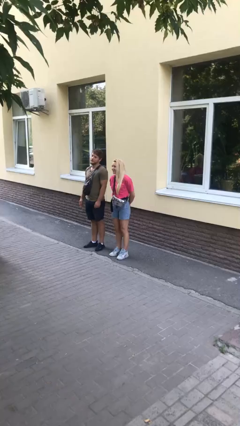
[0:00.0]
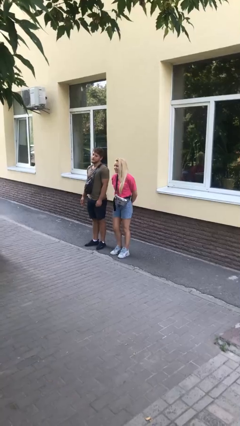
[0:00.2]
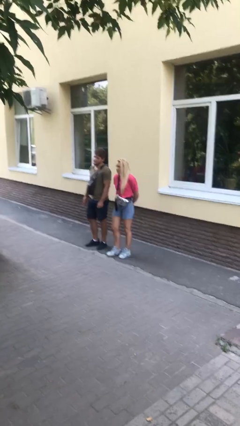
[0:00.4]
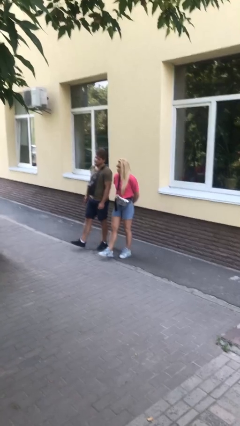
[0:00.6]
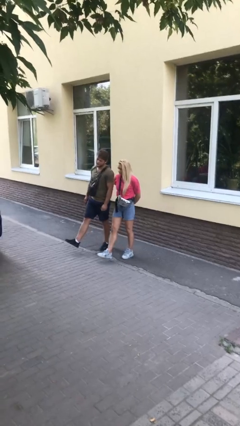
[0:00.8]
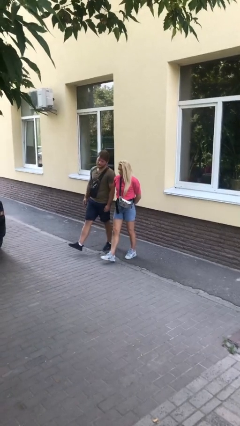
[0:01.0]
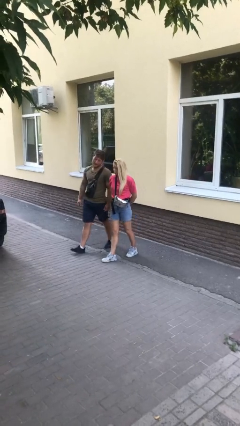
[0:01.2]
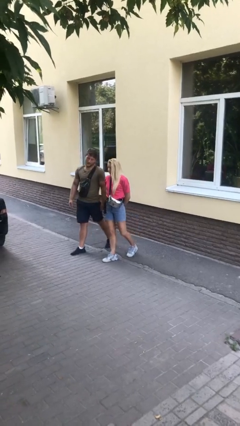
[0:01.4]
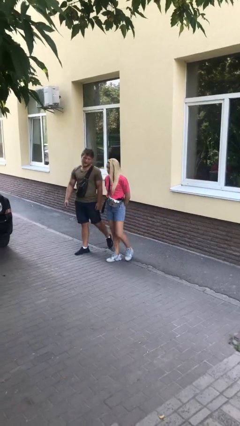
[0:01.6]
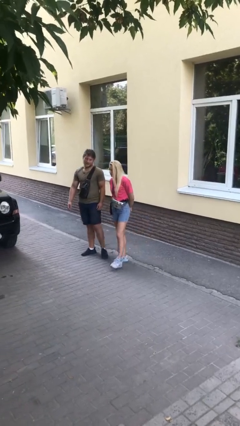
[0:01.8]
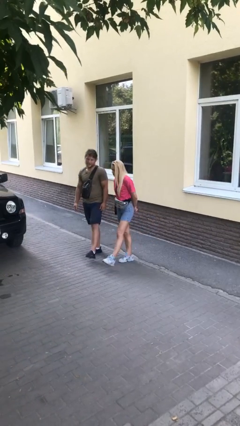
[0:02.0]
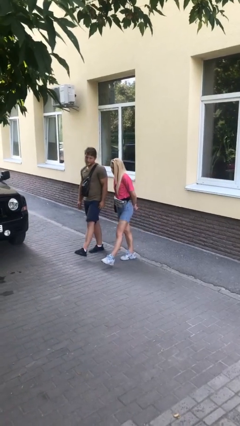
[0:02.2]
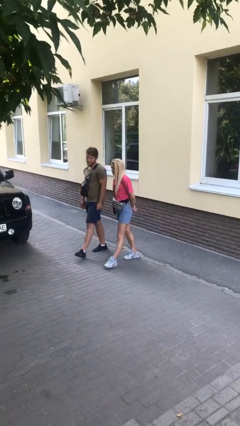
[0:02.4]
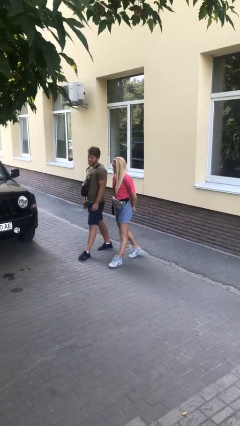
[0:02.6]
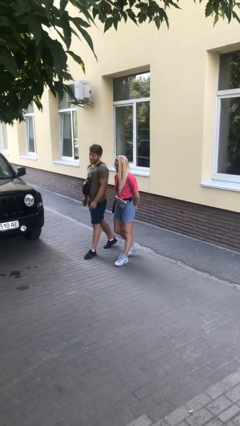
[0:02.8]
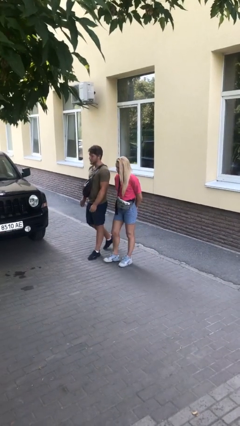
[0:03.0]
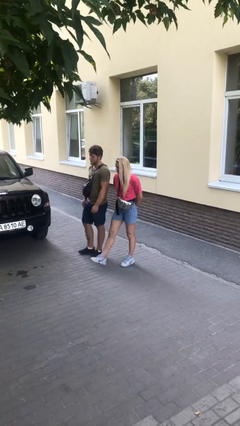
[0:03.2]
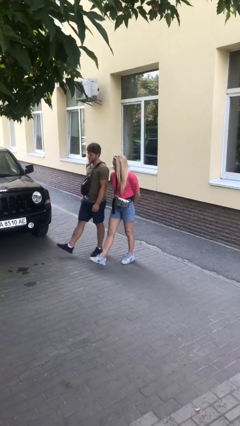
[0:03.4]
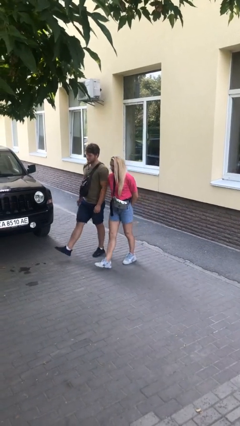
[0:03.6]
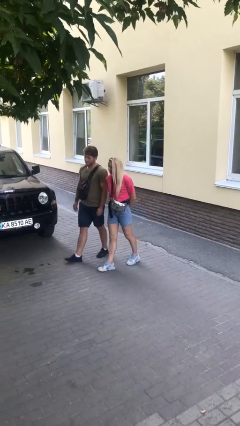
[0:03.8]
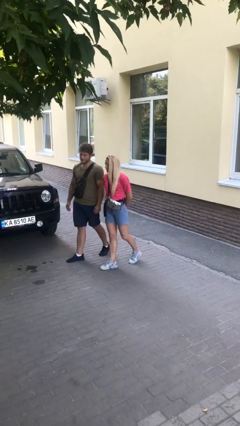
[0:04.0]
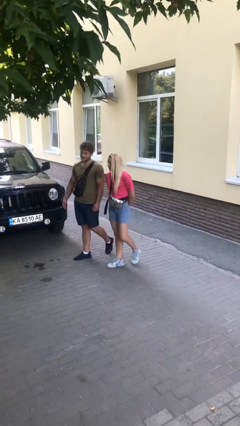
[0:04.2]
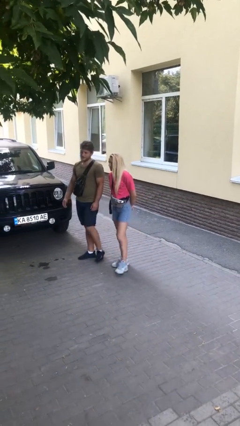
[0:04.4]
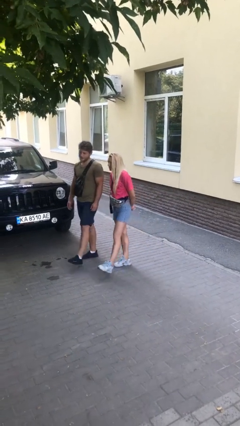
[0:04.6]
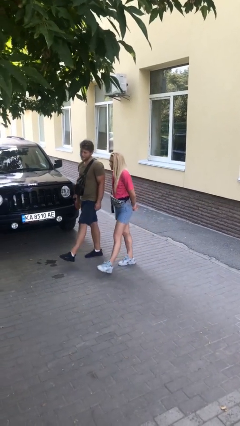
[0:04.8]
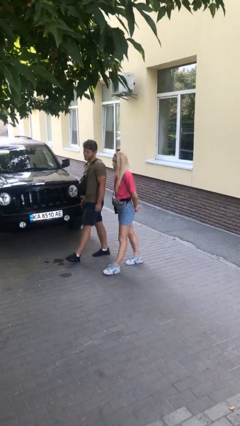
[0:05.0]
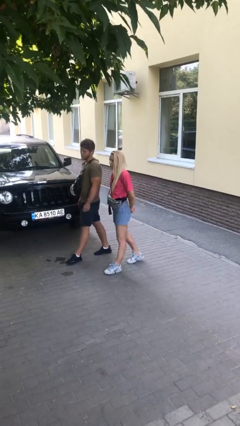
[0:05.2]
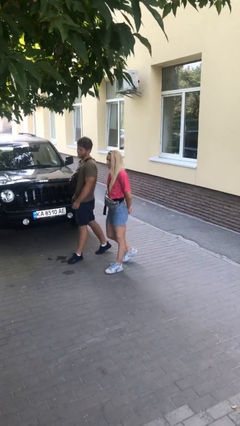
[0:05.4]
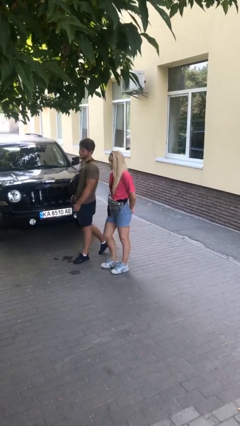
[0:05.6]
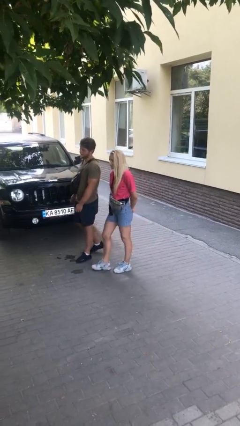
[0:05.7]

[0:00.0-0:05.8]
person talks to person

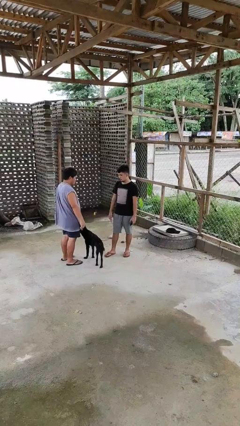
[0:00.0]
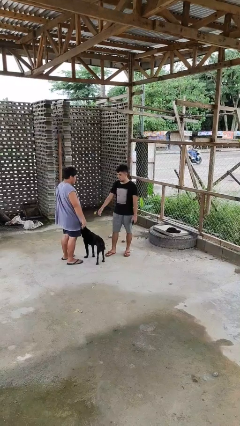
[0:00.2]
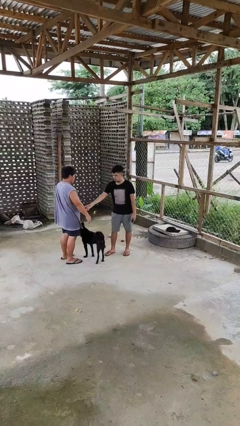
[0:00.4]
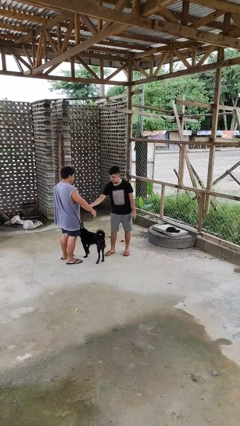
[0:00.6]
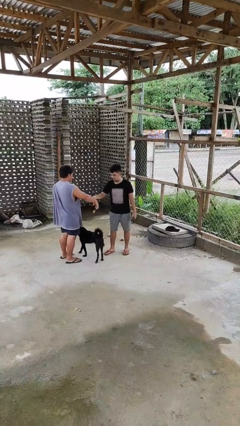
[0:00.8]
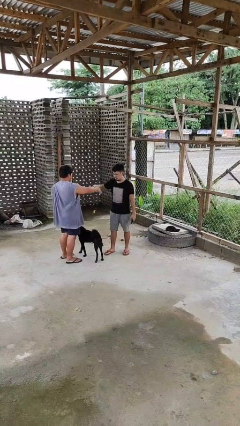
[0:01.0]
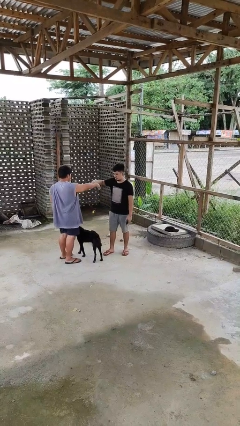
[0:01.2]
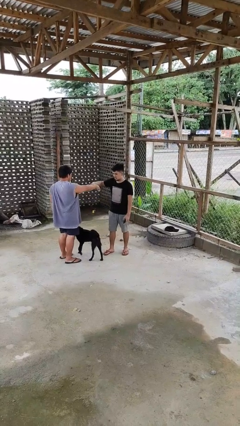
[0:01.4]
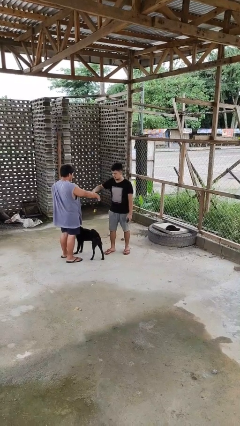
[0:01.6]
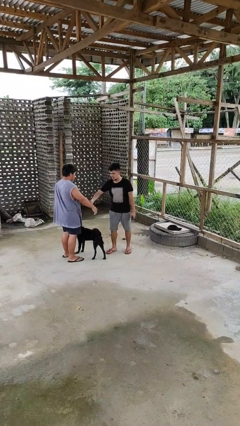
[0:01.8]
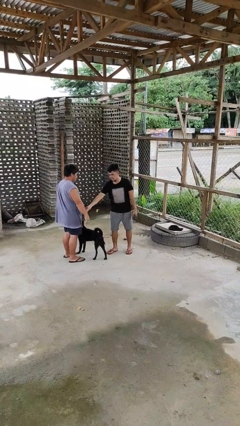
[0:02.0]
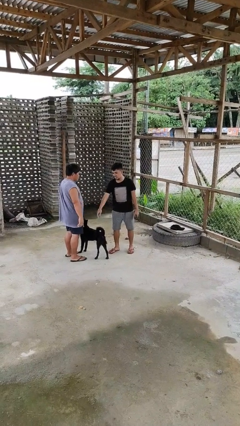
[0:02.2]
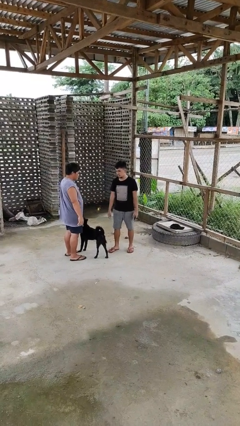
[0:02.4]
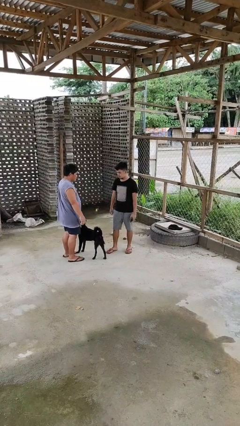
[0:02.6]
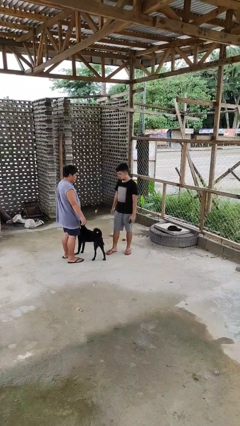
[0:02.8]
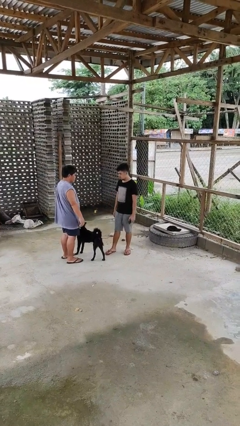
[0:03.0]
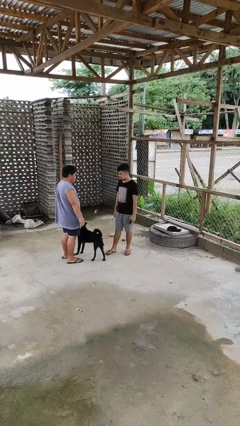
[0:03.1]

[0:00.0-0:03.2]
person grabs person by forearm

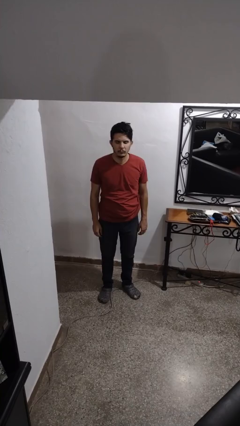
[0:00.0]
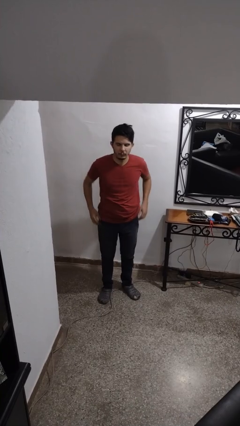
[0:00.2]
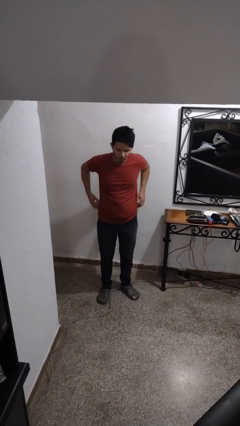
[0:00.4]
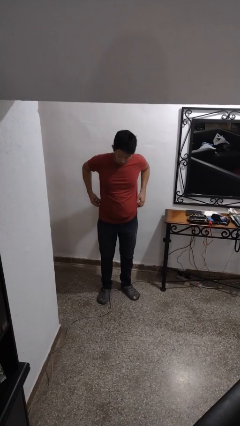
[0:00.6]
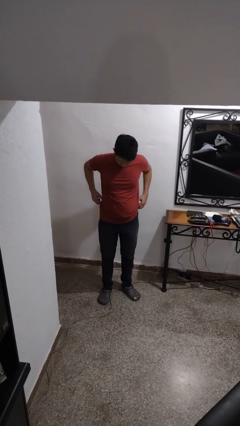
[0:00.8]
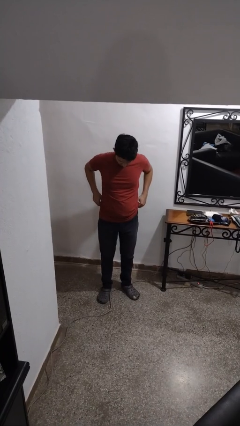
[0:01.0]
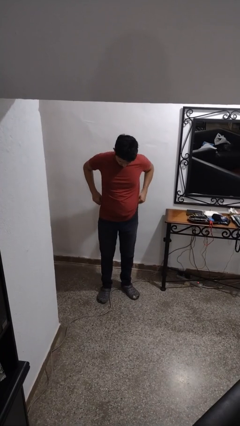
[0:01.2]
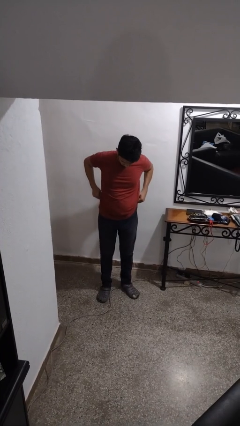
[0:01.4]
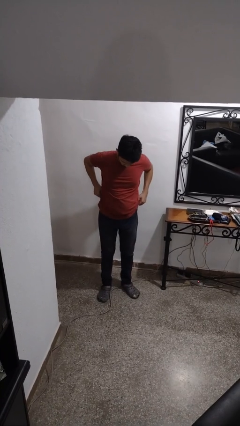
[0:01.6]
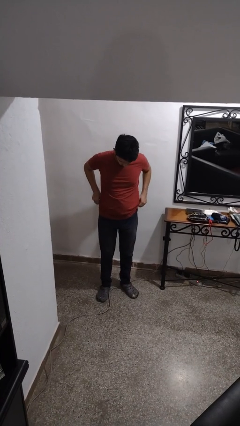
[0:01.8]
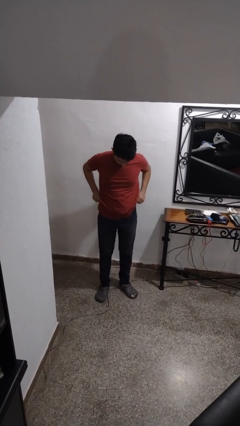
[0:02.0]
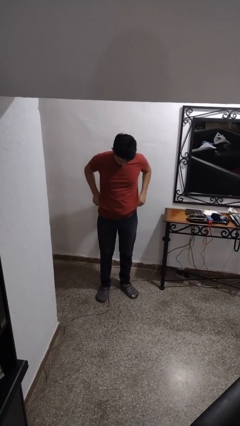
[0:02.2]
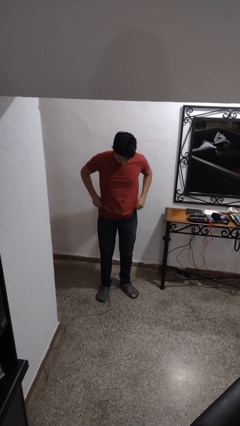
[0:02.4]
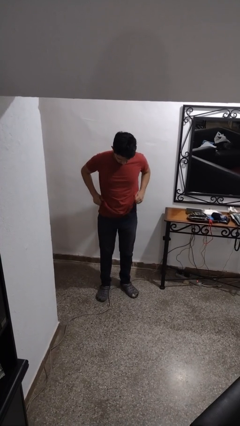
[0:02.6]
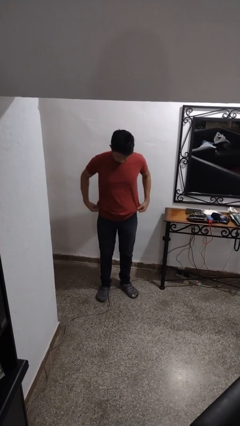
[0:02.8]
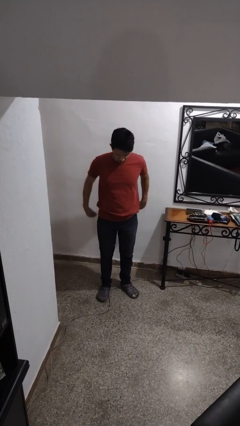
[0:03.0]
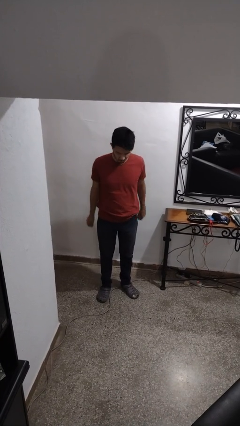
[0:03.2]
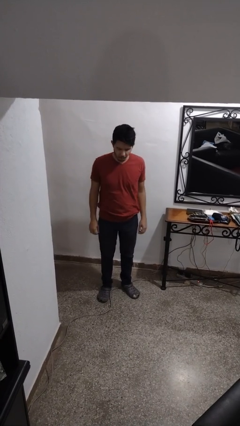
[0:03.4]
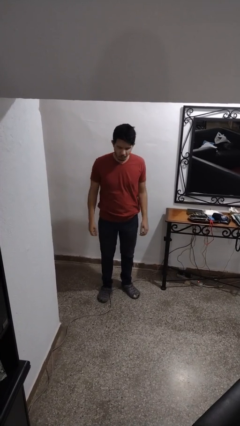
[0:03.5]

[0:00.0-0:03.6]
person hikes up pants

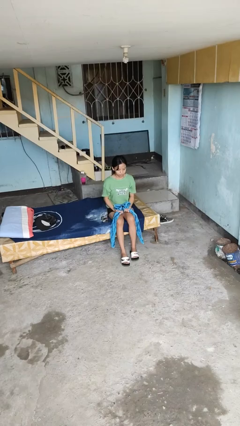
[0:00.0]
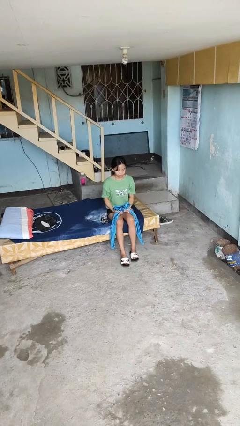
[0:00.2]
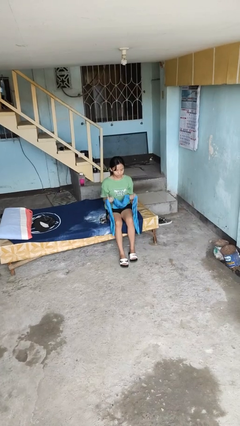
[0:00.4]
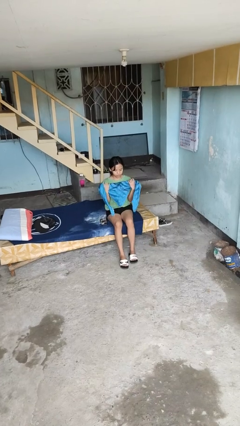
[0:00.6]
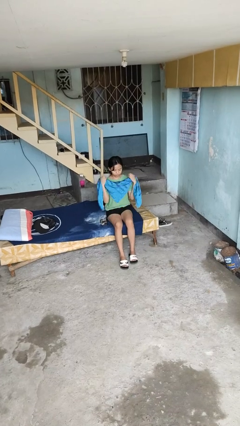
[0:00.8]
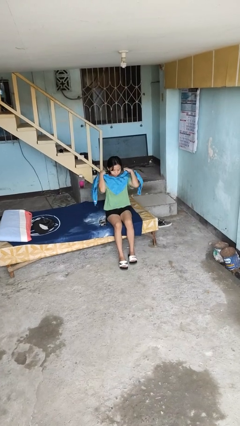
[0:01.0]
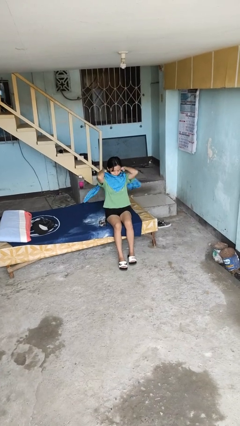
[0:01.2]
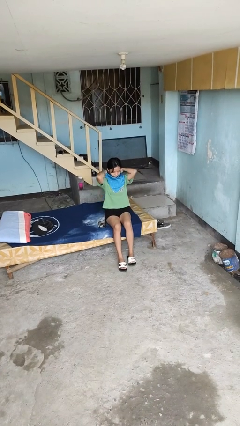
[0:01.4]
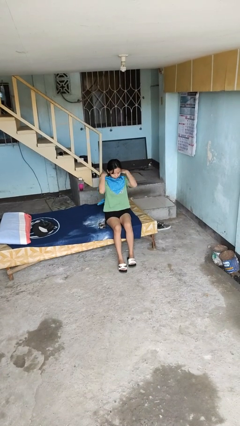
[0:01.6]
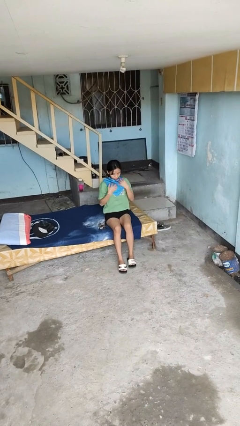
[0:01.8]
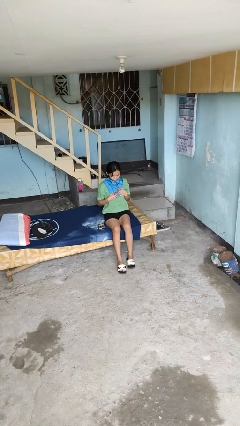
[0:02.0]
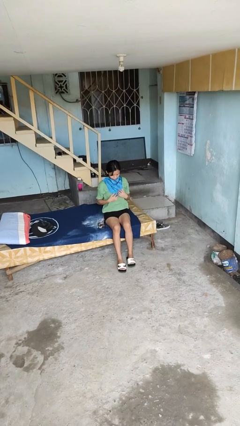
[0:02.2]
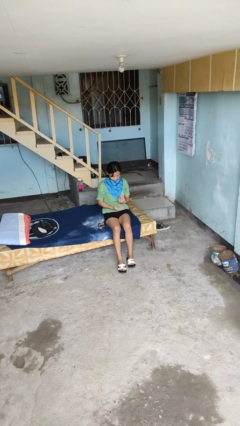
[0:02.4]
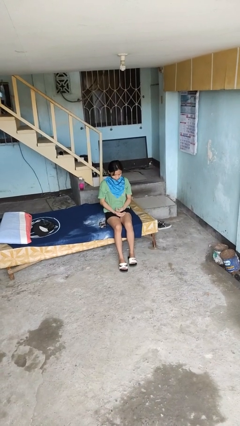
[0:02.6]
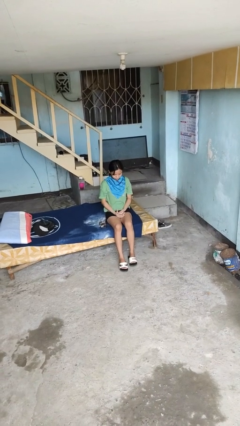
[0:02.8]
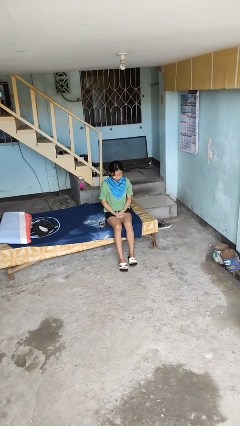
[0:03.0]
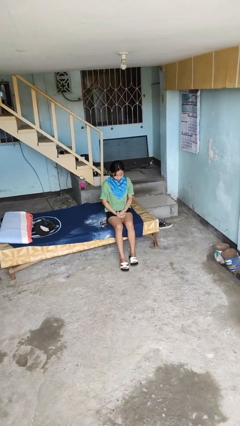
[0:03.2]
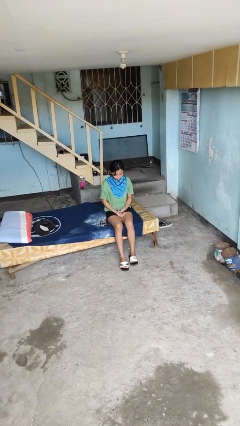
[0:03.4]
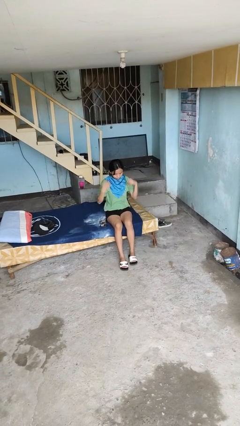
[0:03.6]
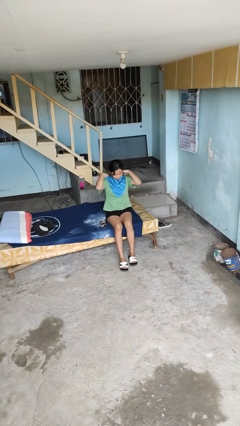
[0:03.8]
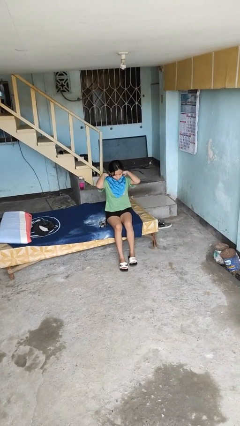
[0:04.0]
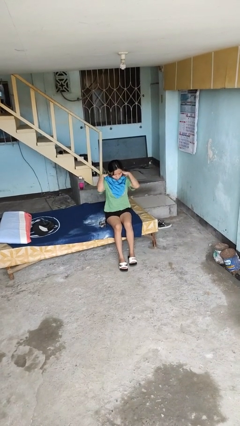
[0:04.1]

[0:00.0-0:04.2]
person puts on scarf

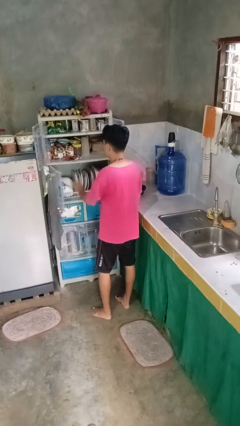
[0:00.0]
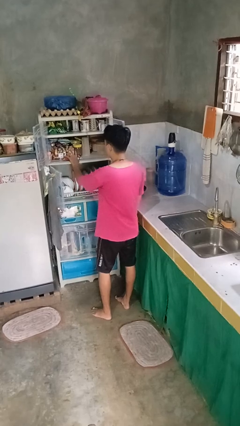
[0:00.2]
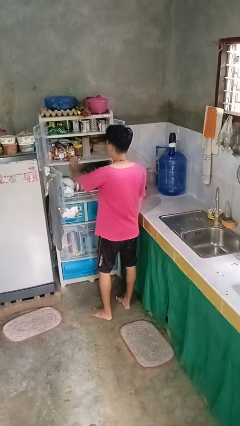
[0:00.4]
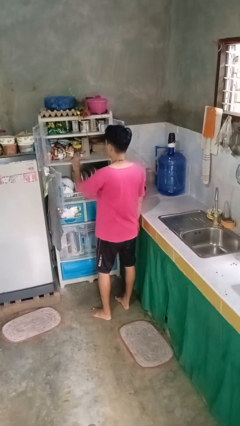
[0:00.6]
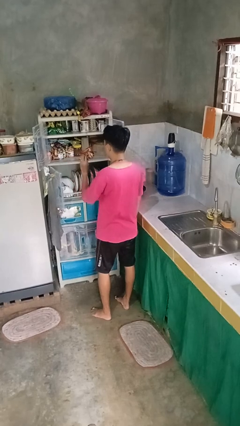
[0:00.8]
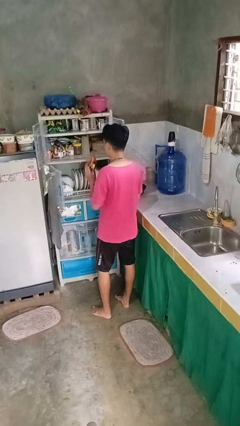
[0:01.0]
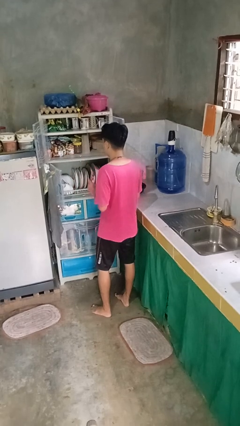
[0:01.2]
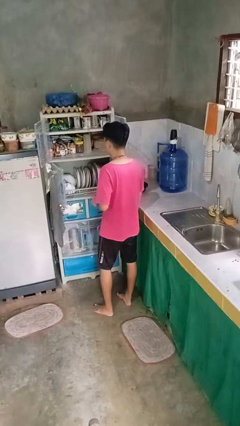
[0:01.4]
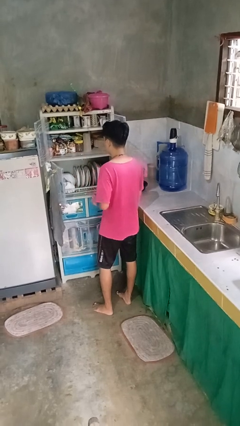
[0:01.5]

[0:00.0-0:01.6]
person takes object from cabinet
